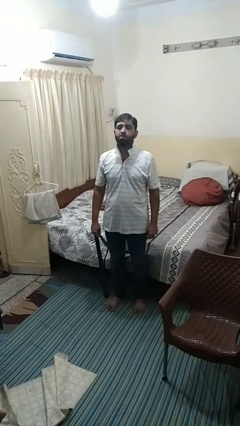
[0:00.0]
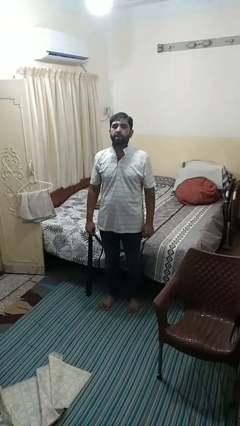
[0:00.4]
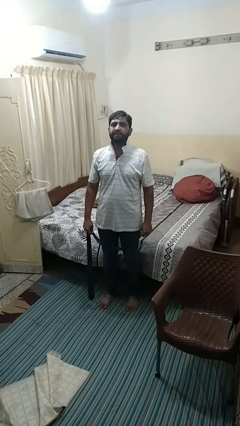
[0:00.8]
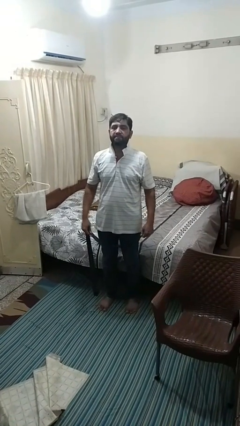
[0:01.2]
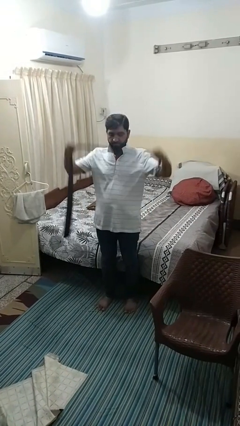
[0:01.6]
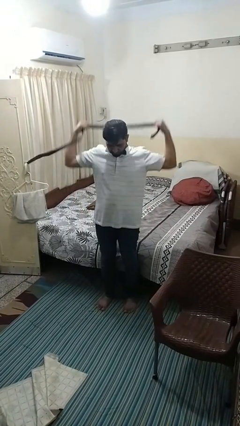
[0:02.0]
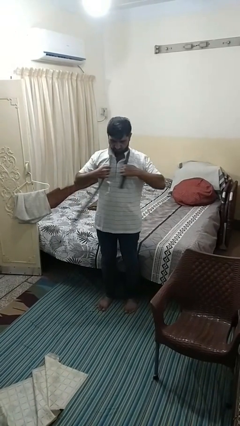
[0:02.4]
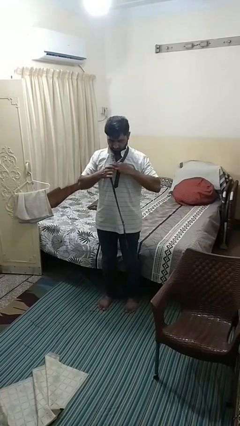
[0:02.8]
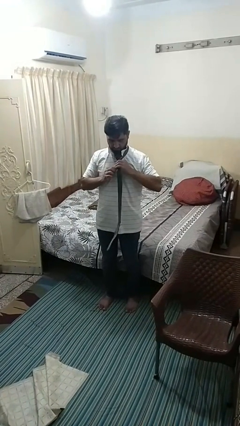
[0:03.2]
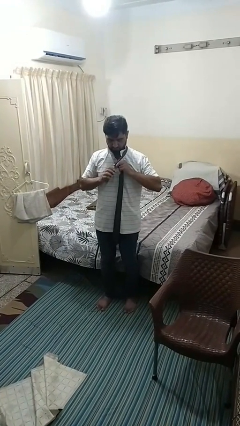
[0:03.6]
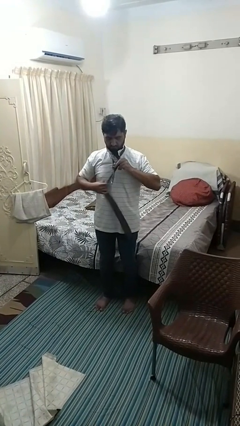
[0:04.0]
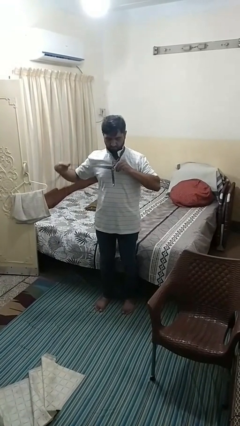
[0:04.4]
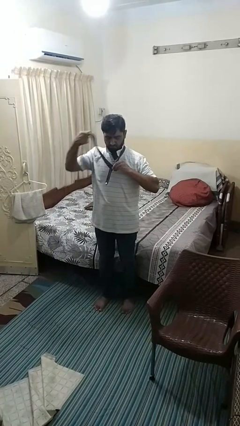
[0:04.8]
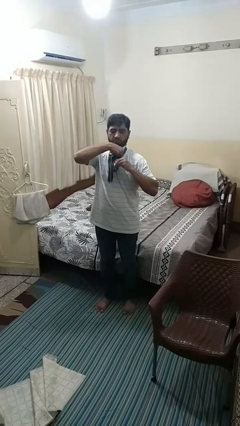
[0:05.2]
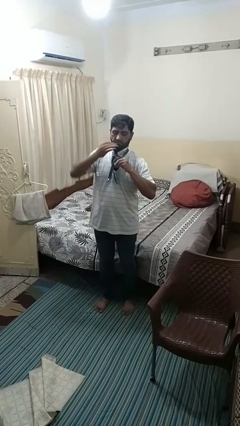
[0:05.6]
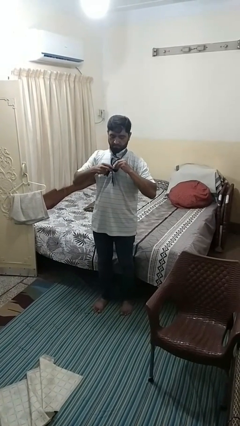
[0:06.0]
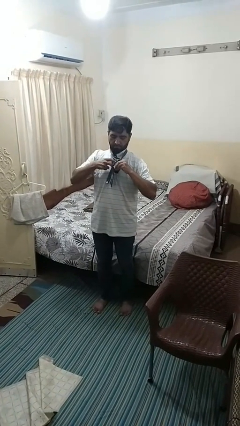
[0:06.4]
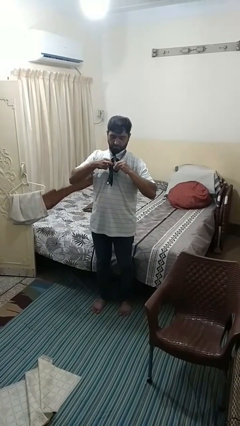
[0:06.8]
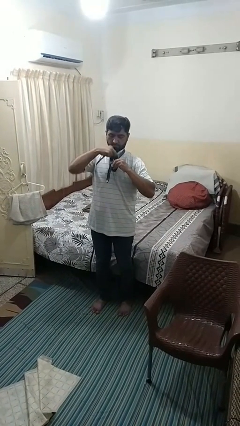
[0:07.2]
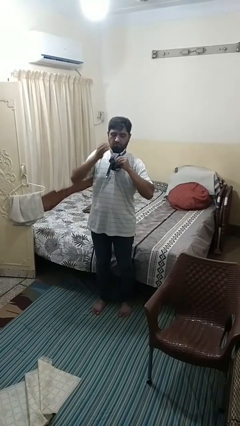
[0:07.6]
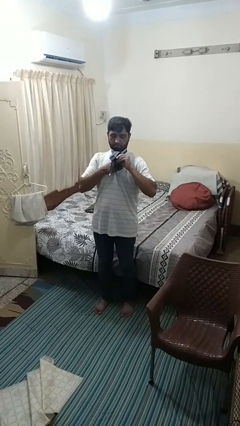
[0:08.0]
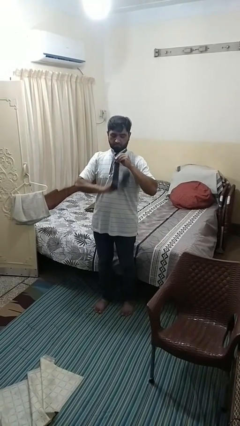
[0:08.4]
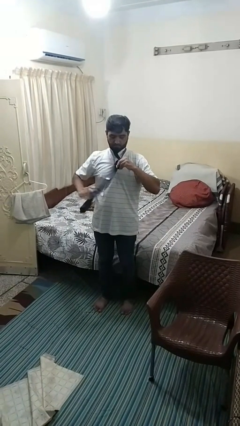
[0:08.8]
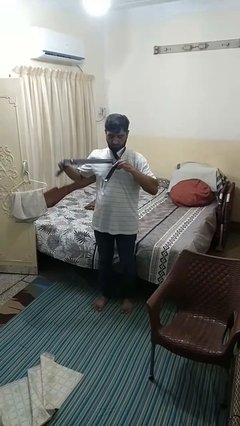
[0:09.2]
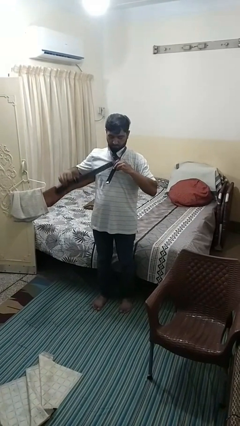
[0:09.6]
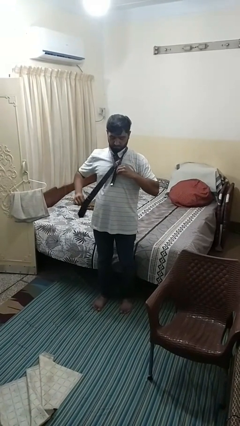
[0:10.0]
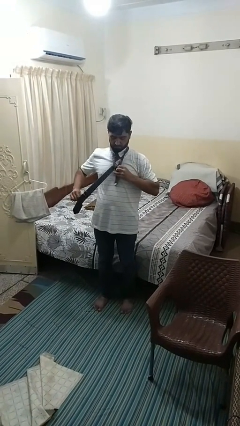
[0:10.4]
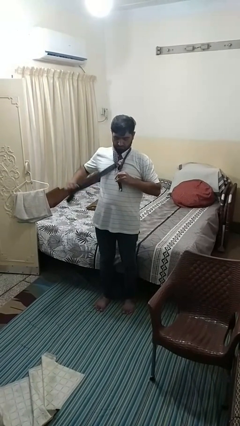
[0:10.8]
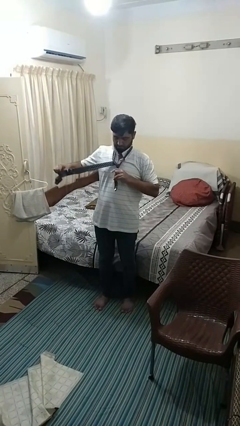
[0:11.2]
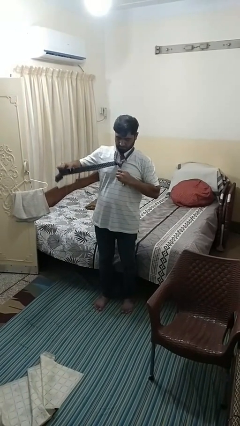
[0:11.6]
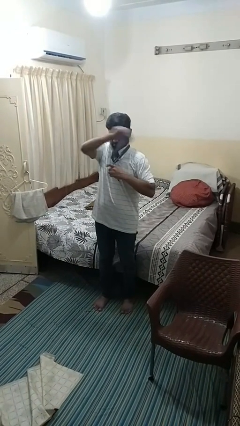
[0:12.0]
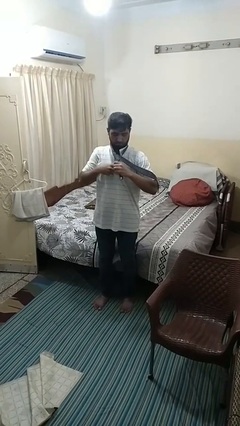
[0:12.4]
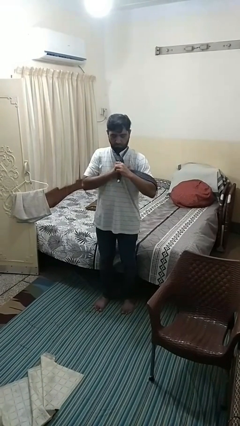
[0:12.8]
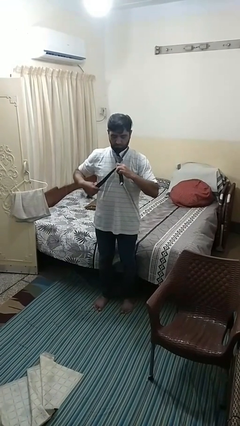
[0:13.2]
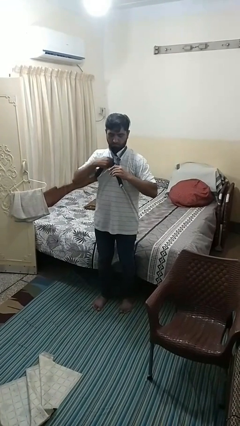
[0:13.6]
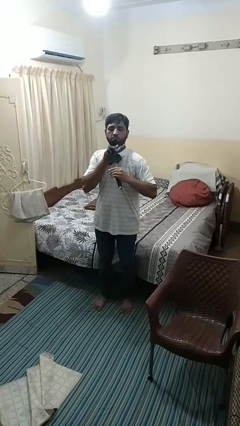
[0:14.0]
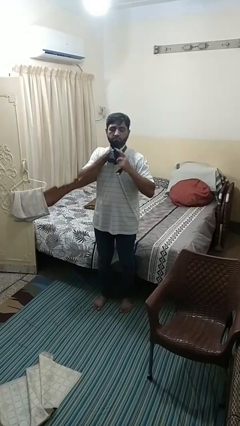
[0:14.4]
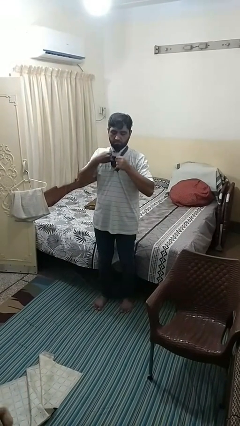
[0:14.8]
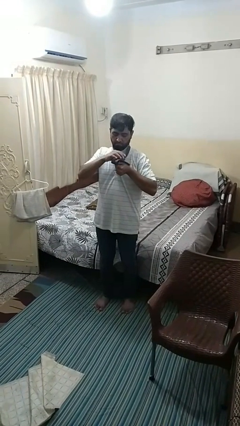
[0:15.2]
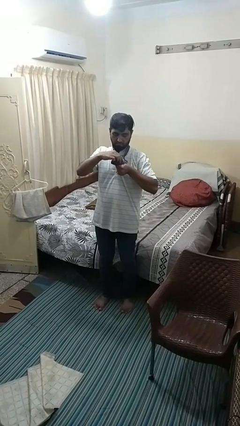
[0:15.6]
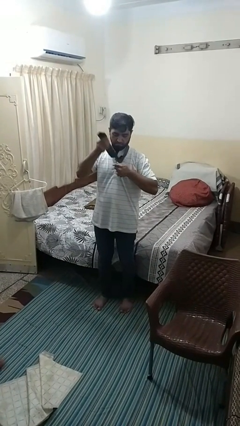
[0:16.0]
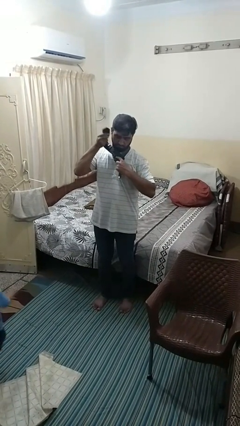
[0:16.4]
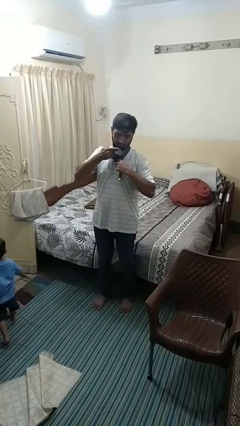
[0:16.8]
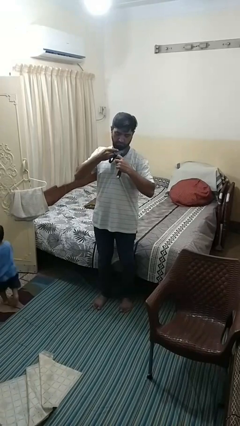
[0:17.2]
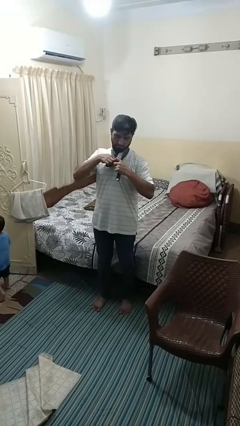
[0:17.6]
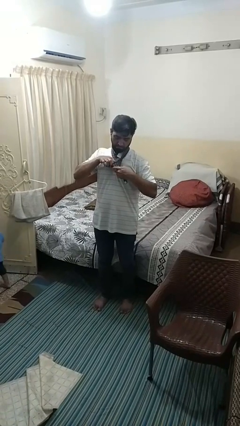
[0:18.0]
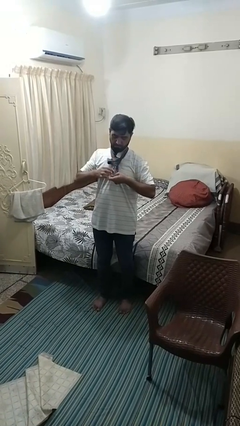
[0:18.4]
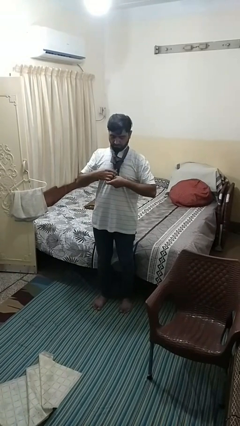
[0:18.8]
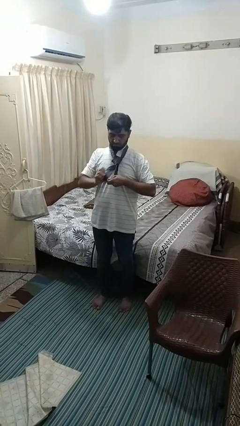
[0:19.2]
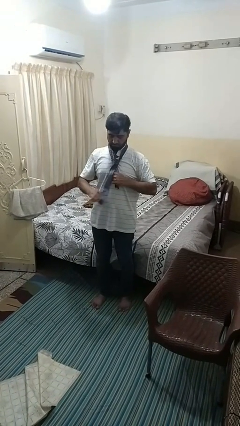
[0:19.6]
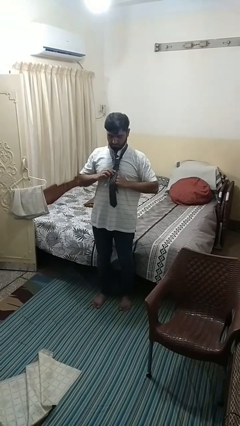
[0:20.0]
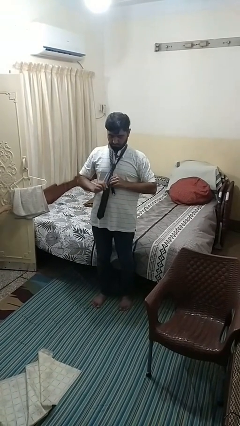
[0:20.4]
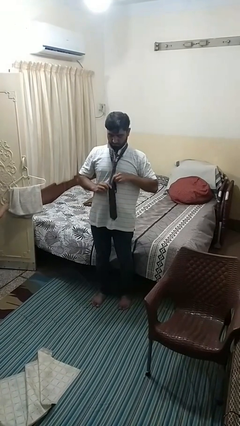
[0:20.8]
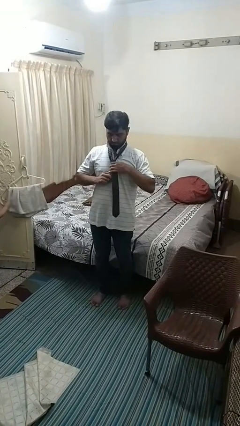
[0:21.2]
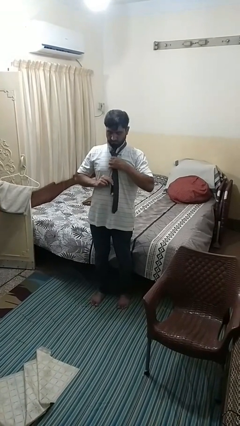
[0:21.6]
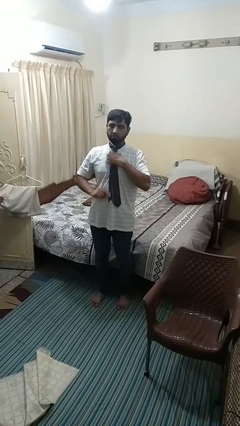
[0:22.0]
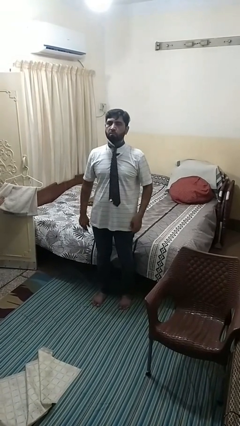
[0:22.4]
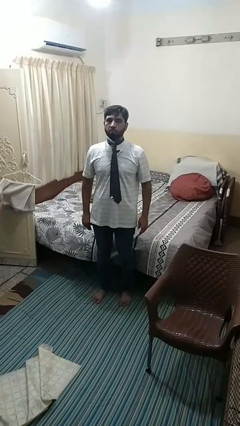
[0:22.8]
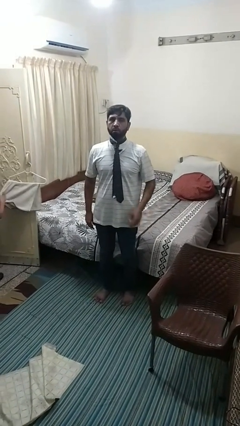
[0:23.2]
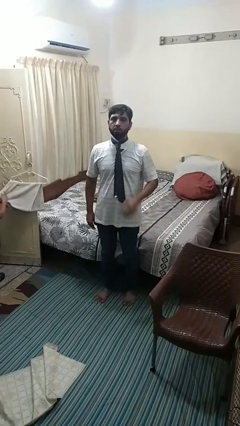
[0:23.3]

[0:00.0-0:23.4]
person puts on necktie

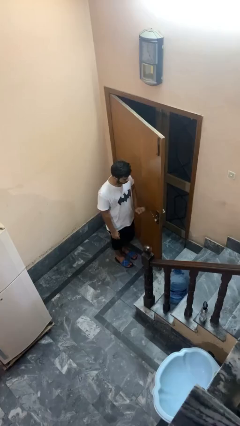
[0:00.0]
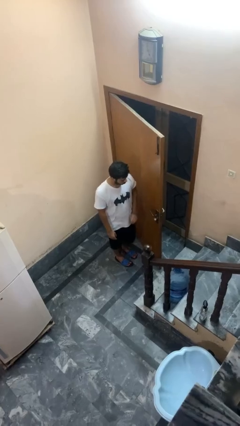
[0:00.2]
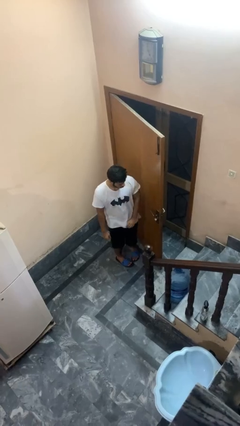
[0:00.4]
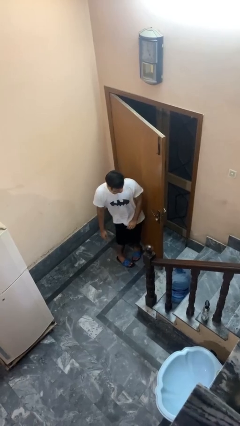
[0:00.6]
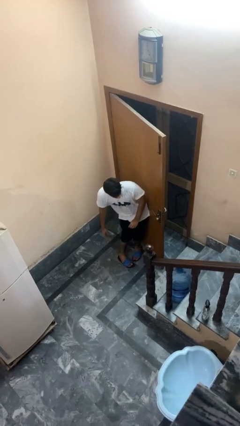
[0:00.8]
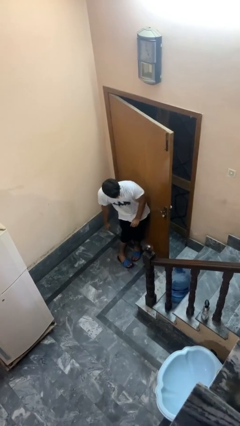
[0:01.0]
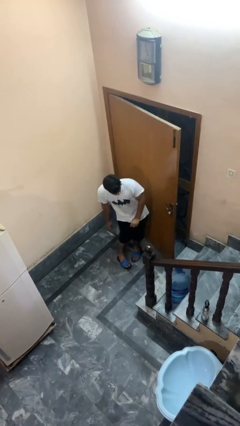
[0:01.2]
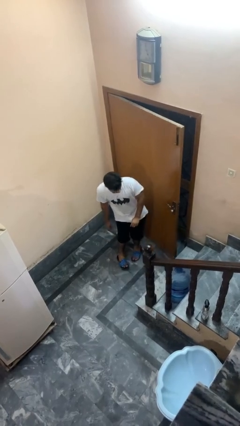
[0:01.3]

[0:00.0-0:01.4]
person closes door with hip

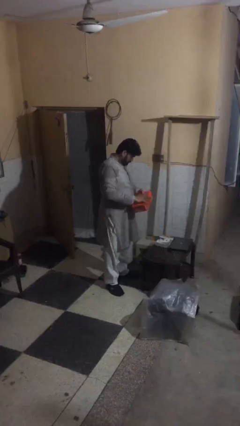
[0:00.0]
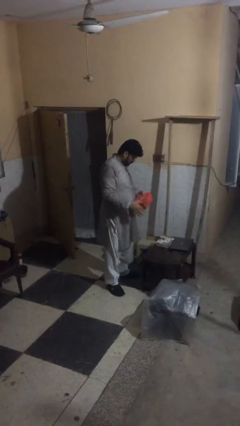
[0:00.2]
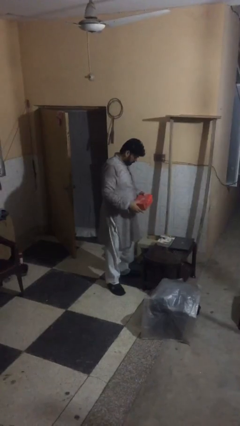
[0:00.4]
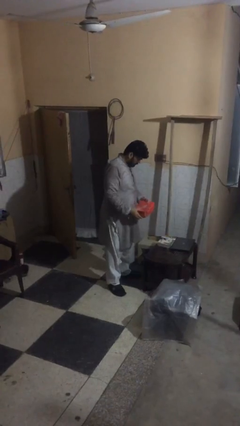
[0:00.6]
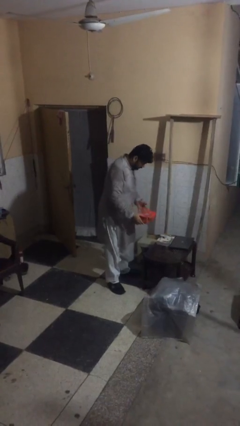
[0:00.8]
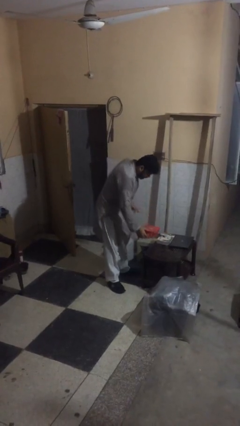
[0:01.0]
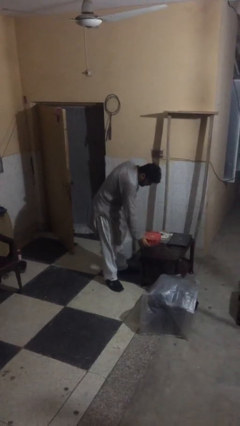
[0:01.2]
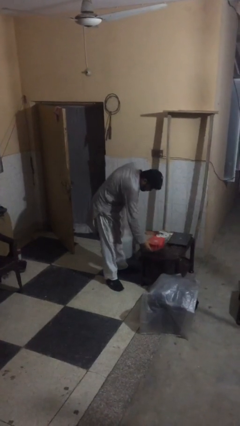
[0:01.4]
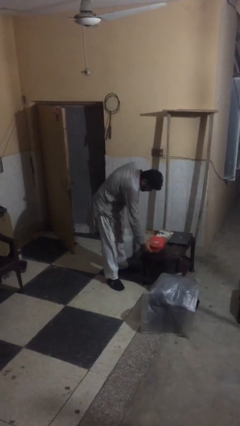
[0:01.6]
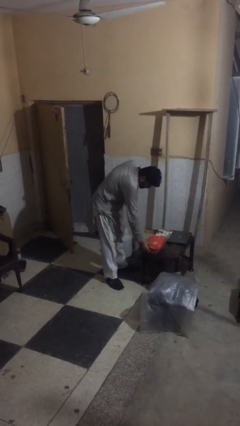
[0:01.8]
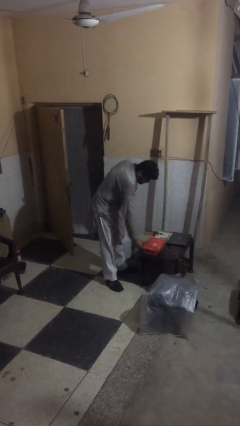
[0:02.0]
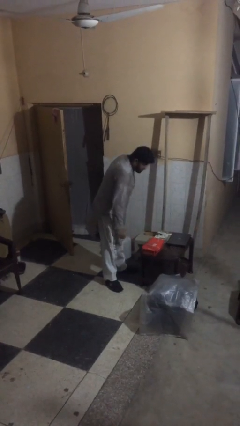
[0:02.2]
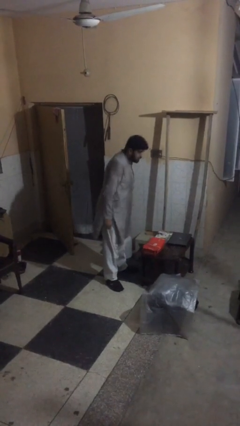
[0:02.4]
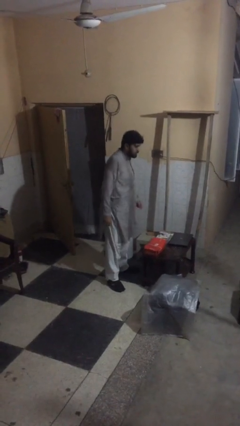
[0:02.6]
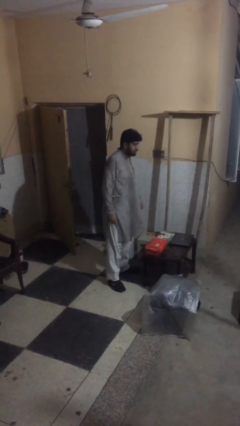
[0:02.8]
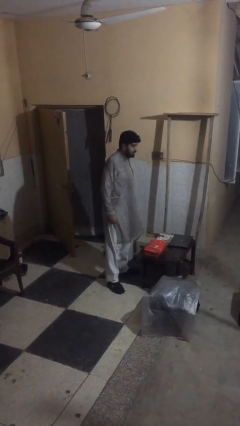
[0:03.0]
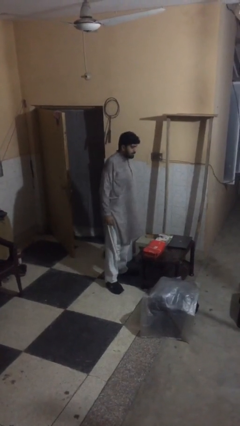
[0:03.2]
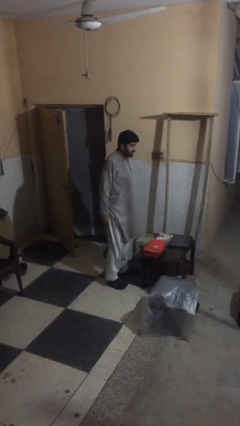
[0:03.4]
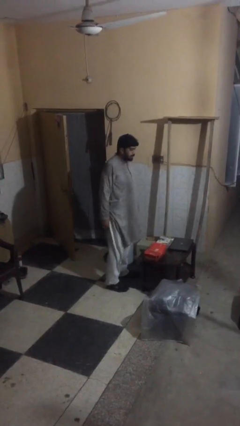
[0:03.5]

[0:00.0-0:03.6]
person puts down object on table

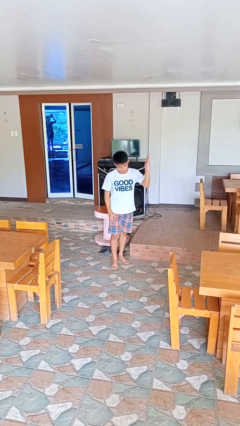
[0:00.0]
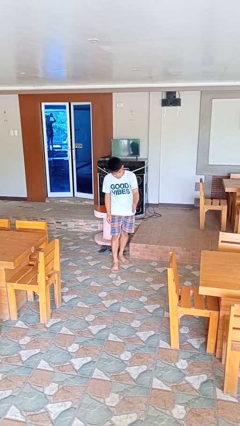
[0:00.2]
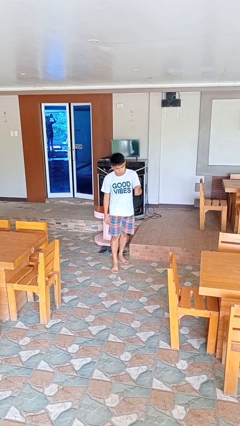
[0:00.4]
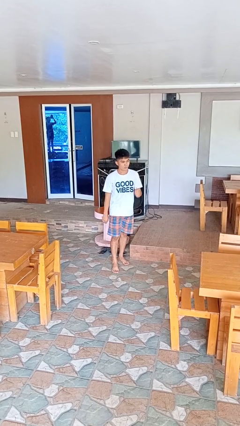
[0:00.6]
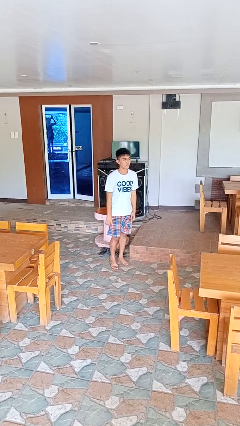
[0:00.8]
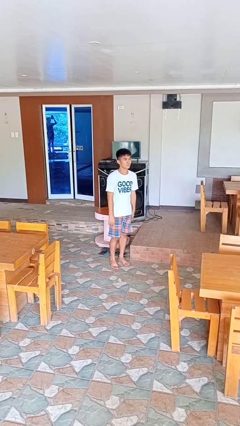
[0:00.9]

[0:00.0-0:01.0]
person karate chop

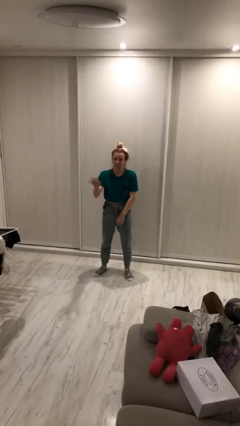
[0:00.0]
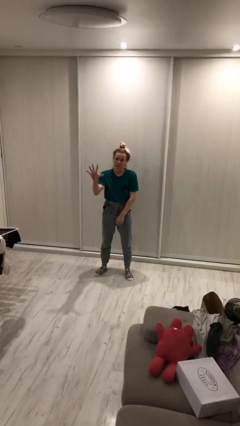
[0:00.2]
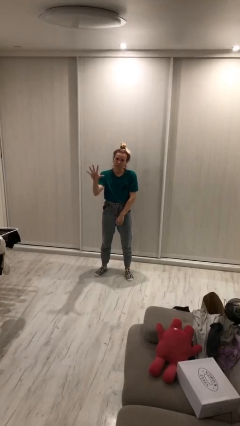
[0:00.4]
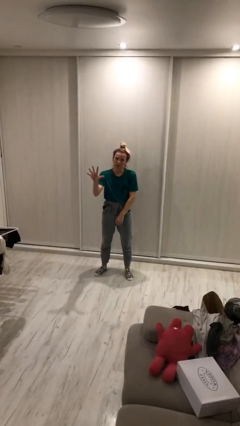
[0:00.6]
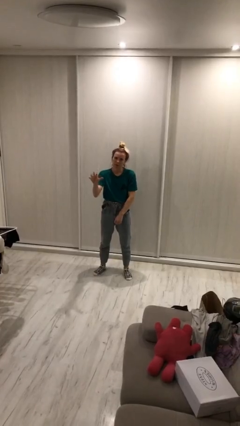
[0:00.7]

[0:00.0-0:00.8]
person gestures number five
